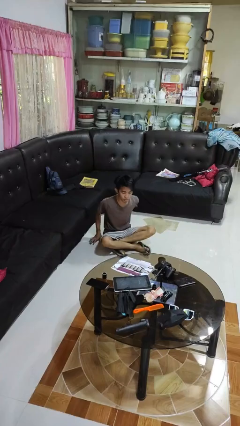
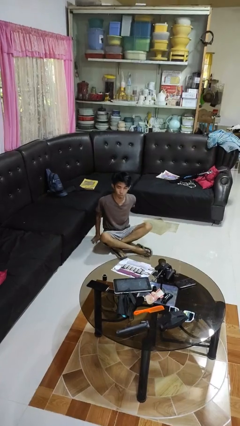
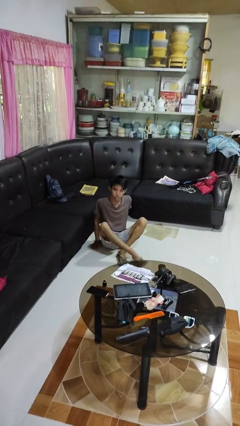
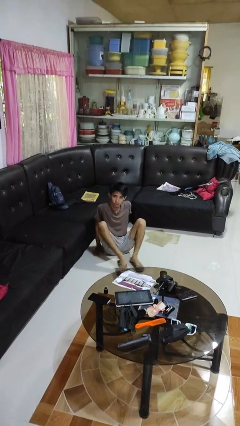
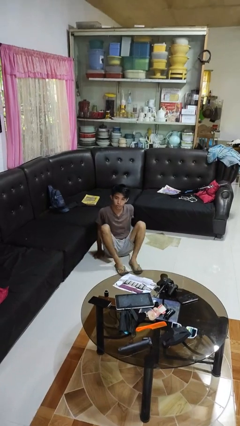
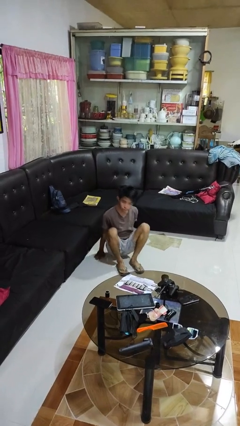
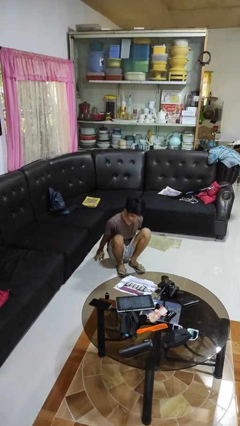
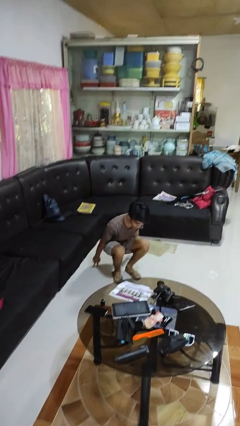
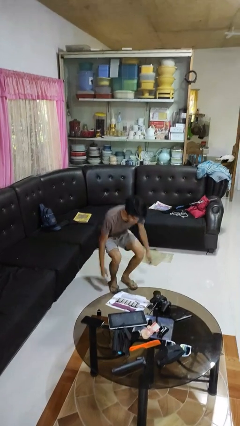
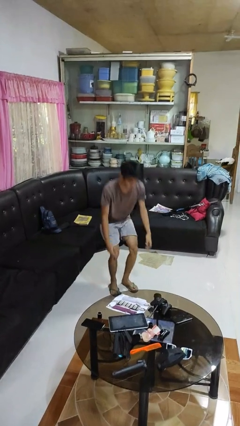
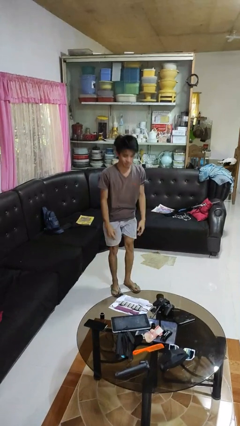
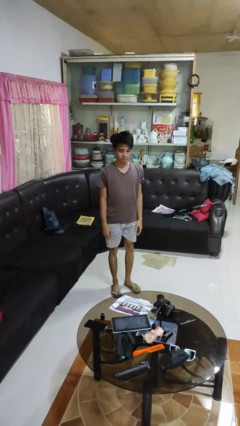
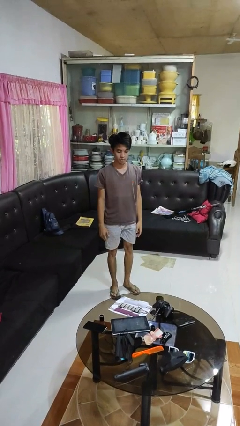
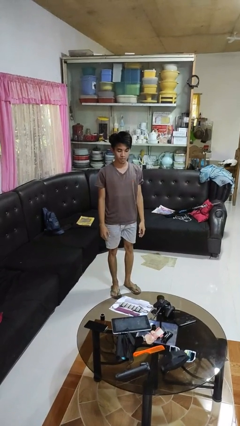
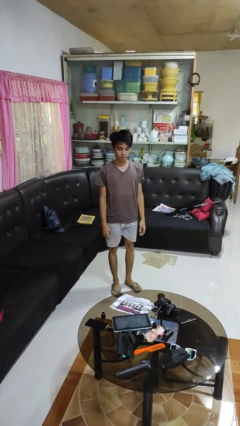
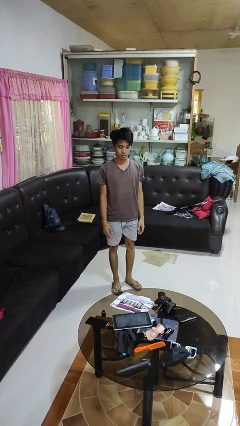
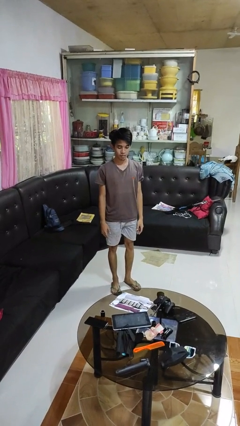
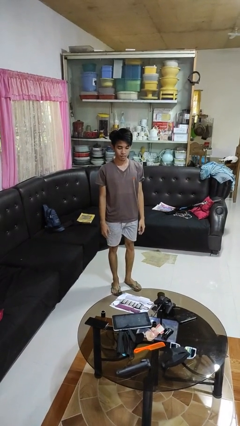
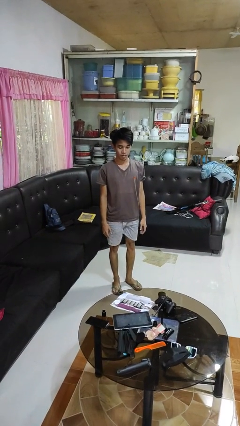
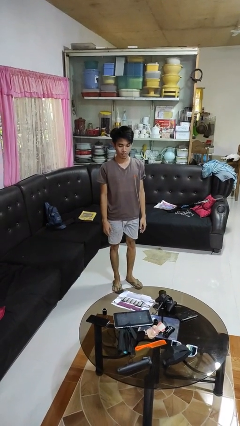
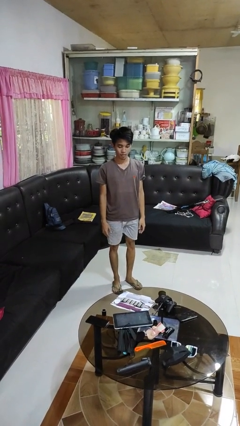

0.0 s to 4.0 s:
person stands up from floor

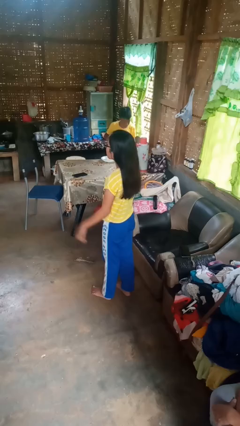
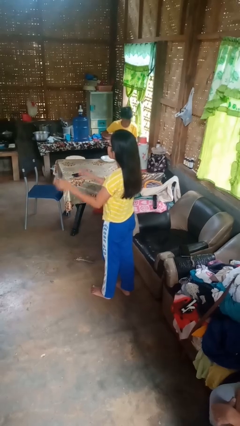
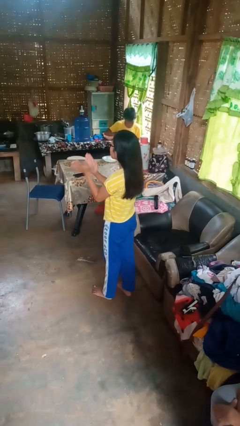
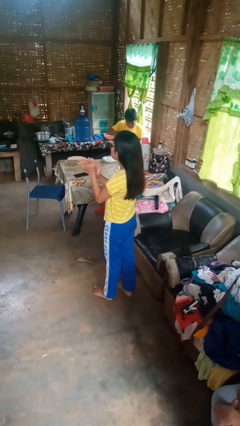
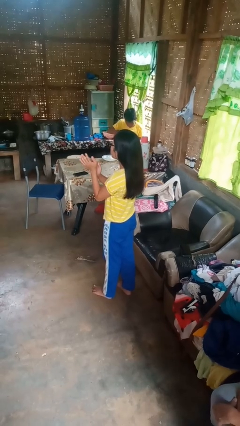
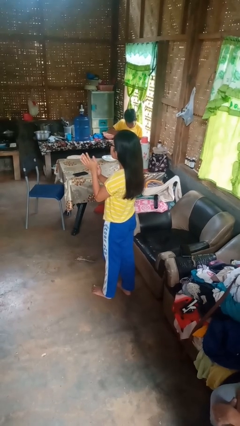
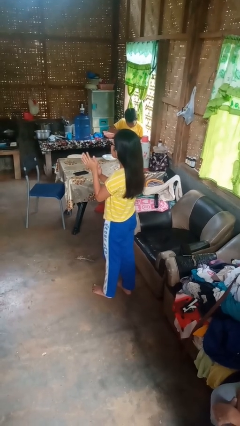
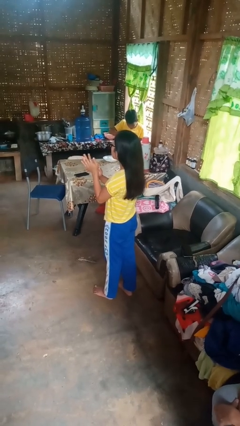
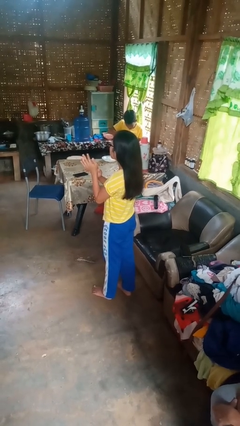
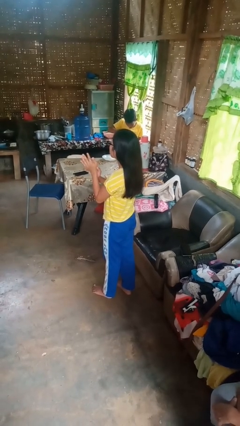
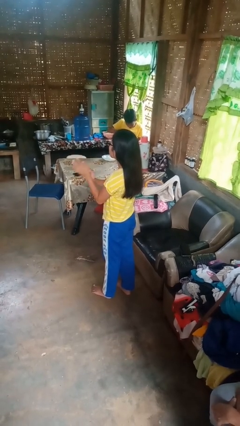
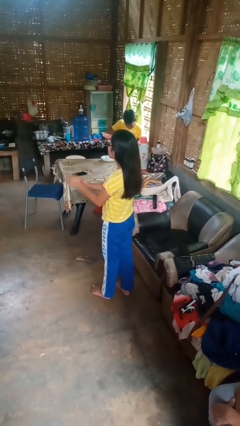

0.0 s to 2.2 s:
person claps hands

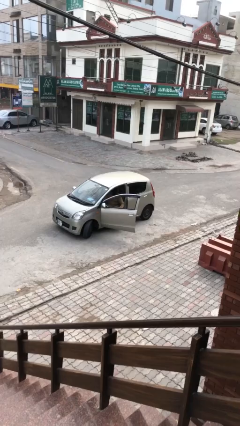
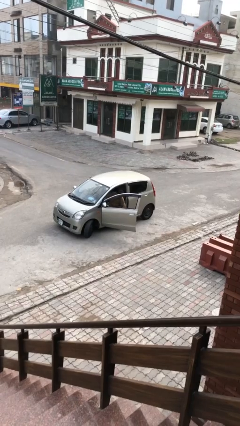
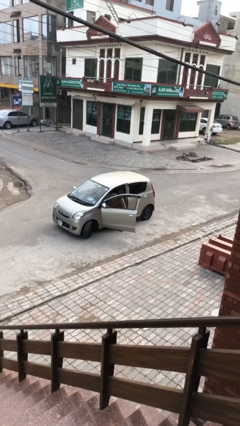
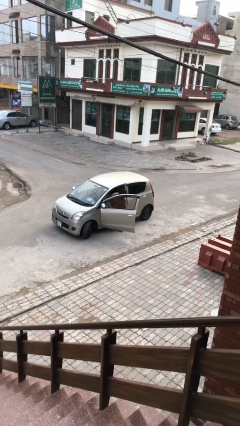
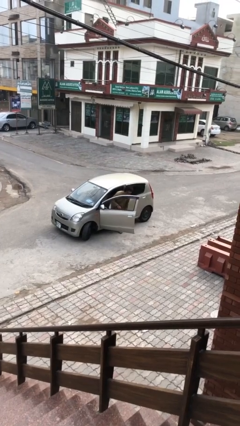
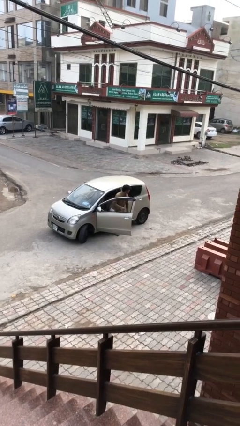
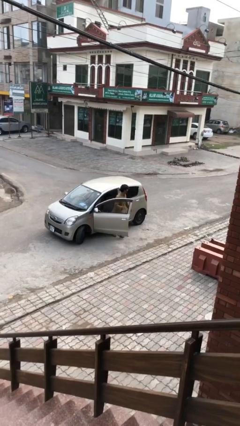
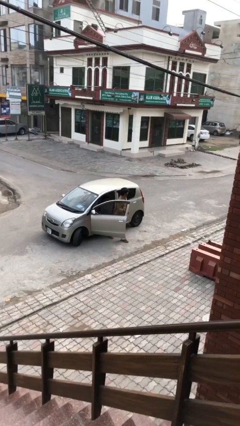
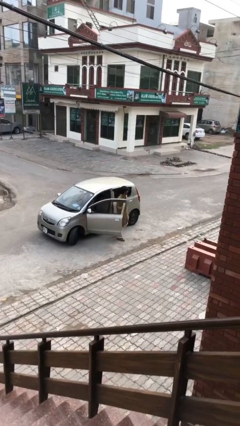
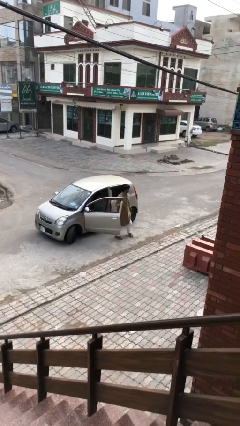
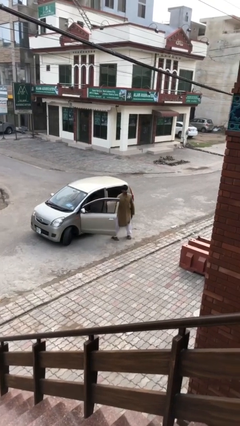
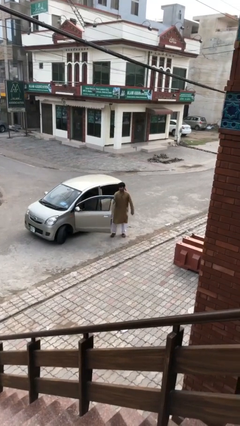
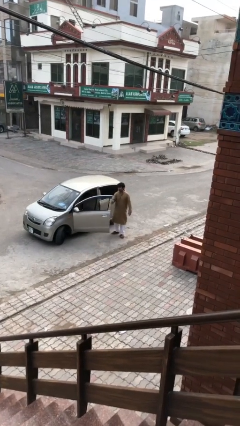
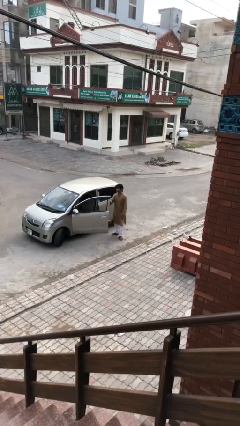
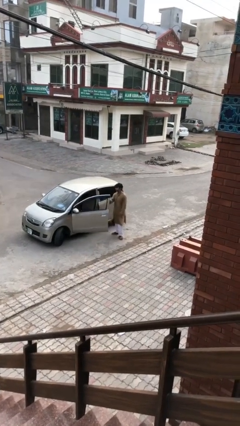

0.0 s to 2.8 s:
person exits car

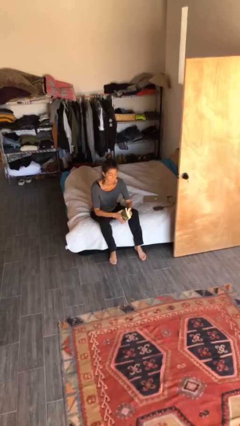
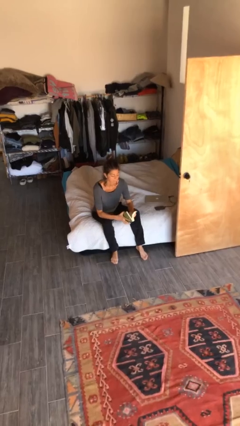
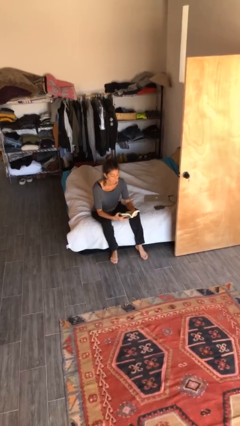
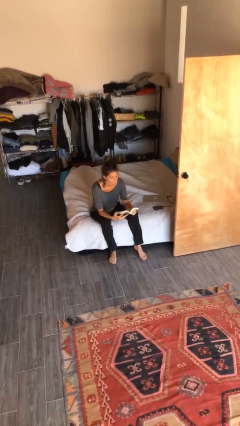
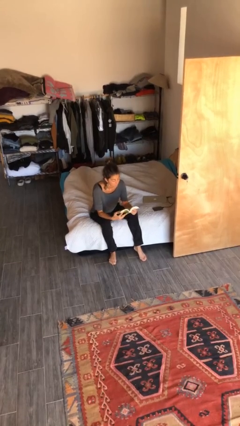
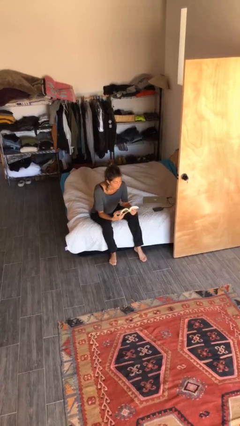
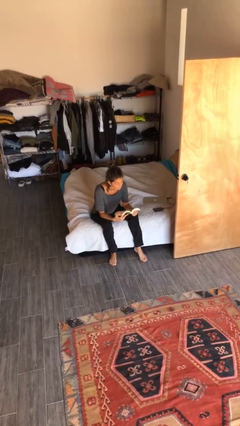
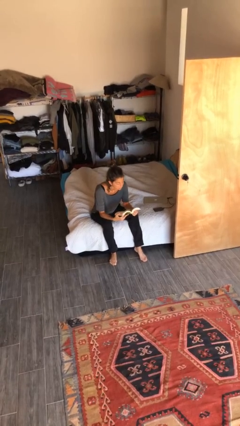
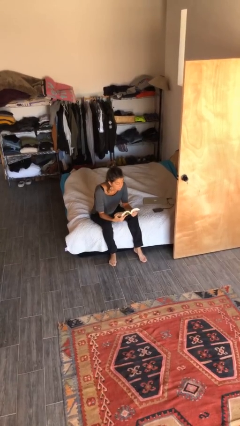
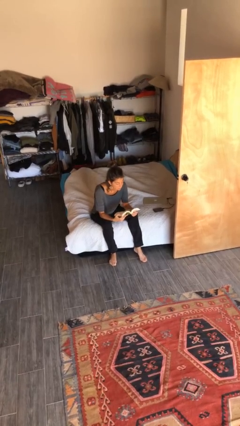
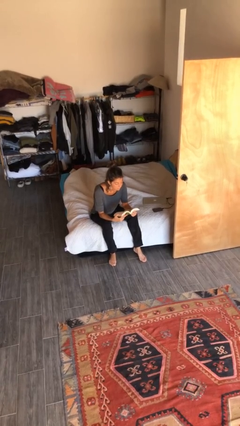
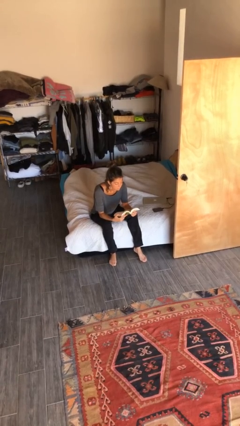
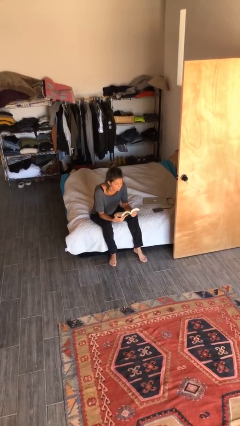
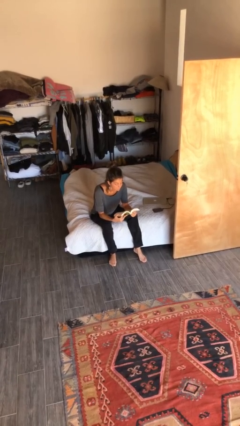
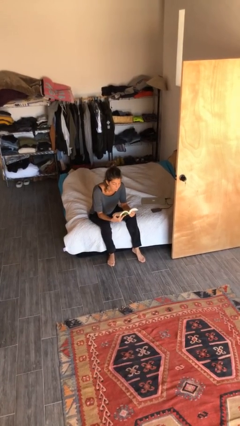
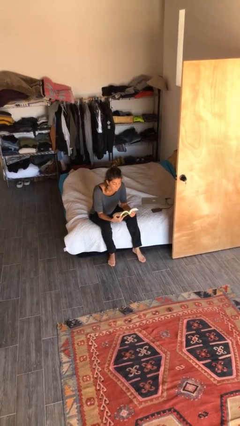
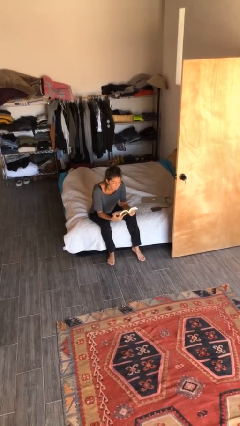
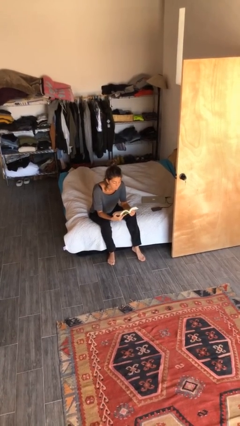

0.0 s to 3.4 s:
person reads document

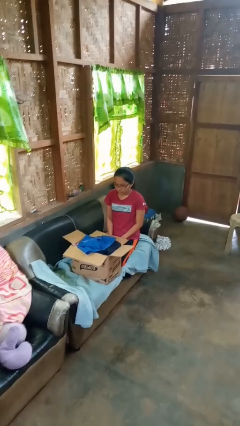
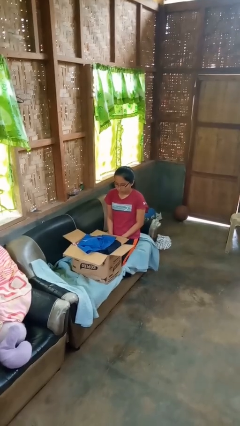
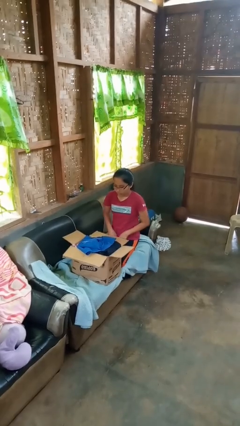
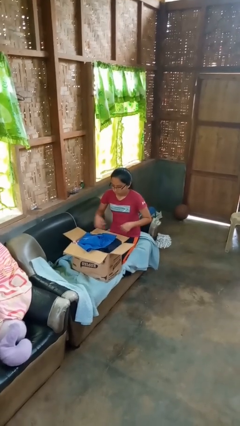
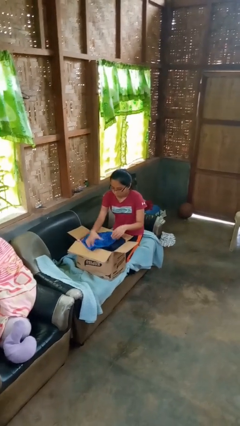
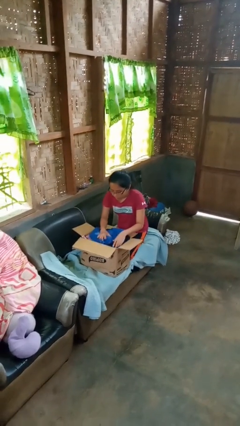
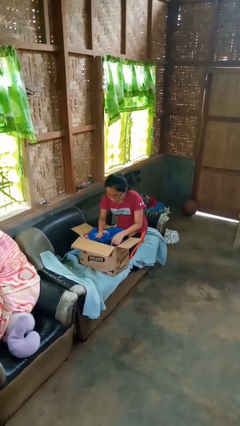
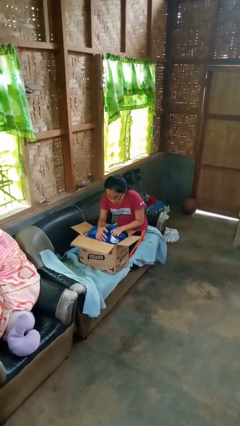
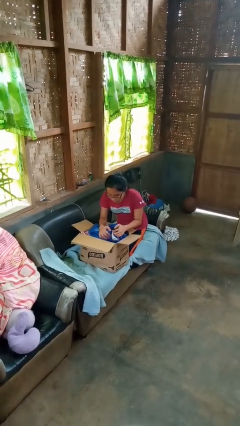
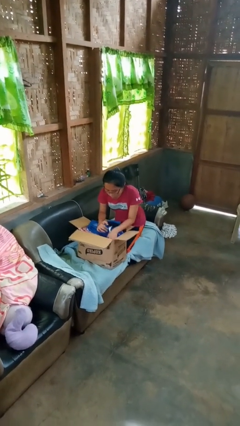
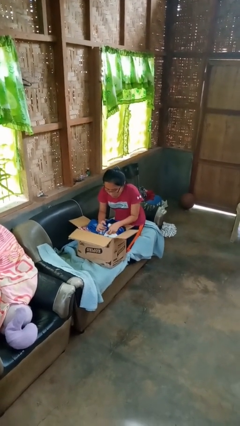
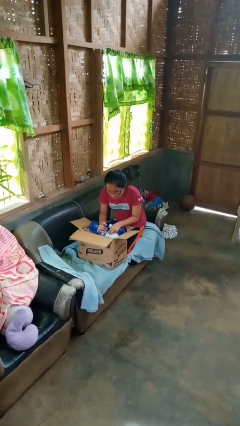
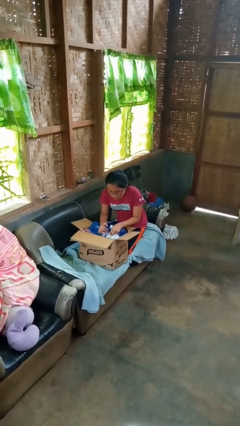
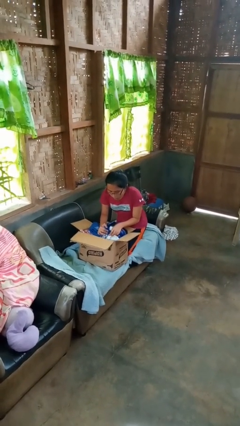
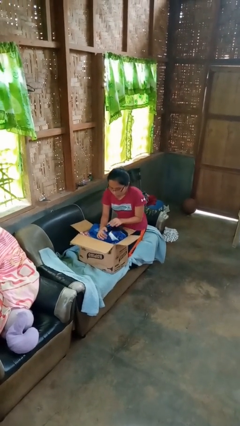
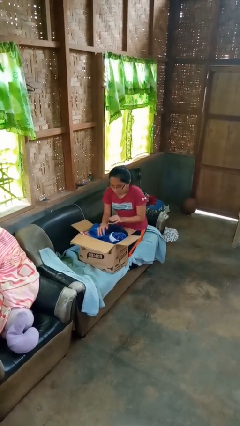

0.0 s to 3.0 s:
person searches in box

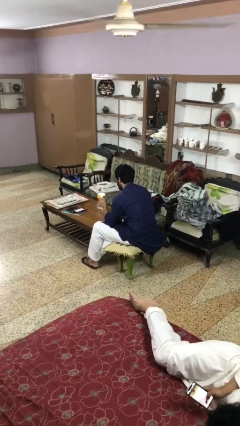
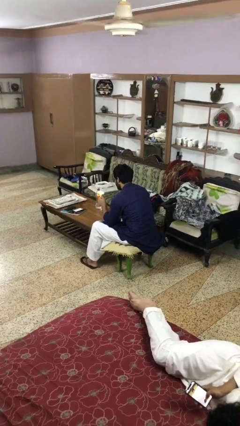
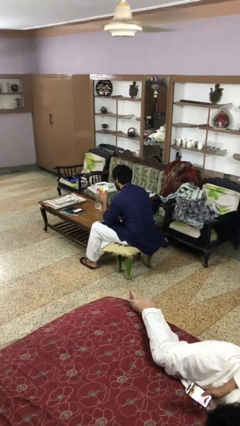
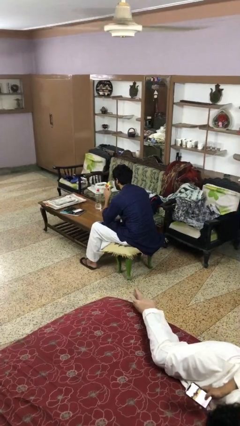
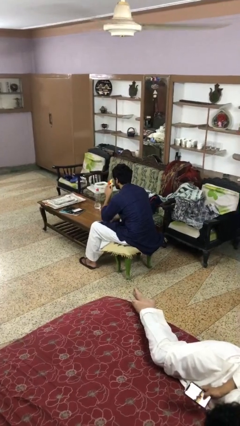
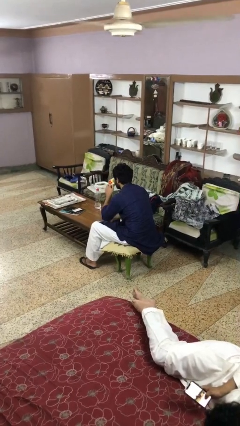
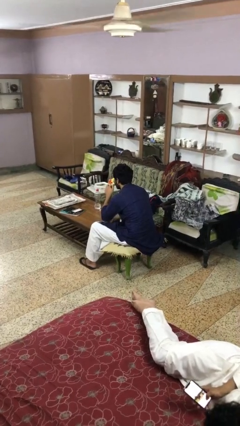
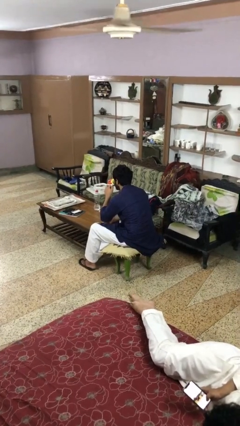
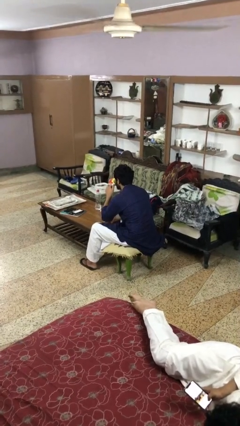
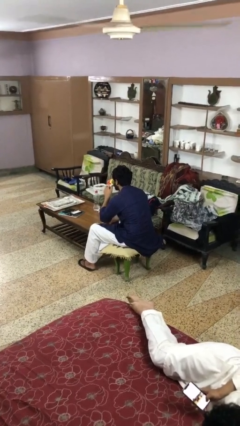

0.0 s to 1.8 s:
person drinks from mug
